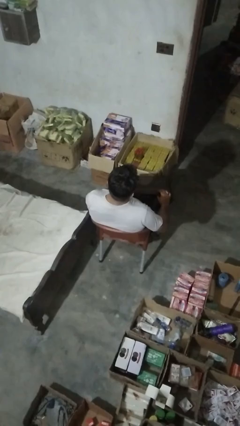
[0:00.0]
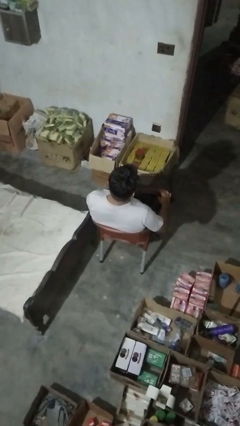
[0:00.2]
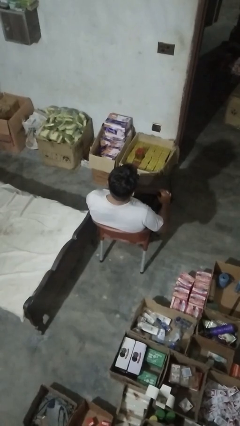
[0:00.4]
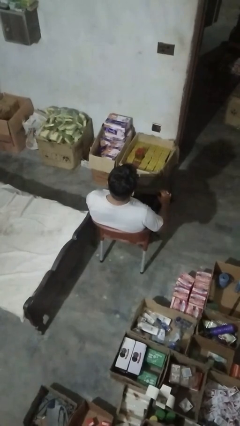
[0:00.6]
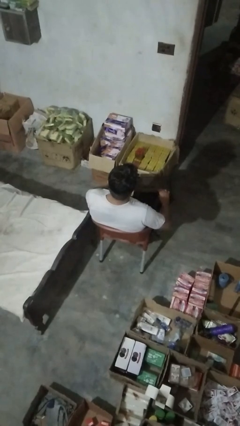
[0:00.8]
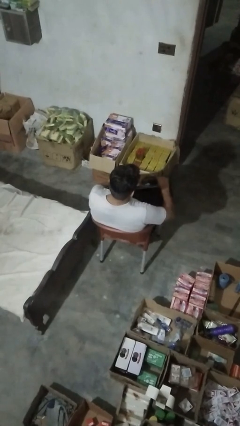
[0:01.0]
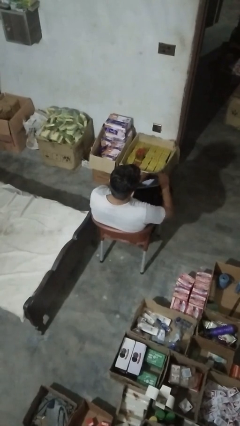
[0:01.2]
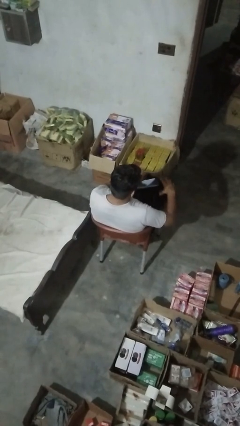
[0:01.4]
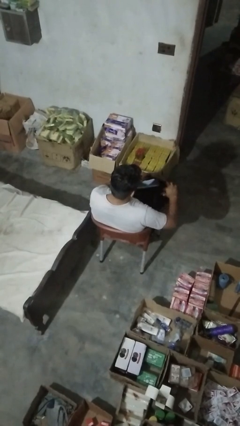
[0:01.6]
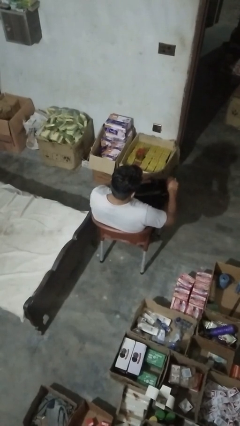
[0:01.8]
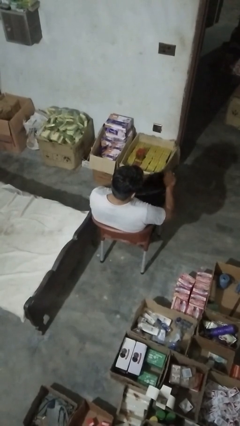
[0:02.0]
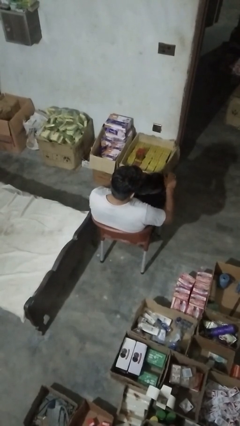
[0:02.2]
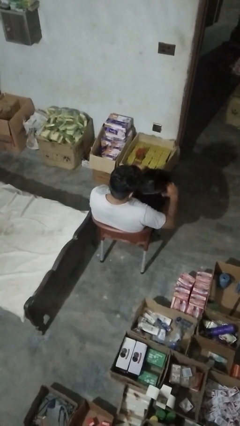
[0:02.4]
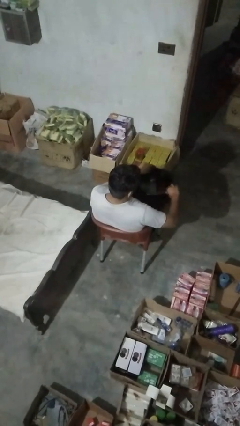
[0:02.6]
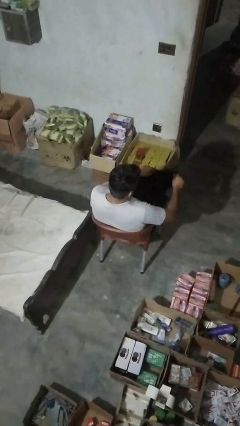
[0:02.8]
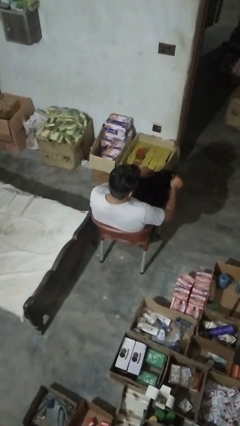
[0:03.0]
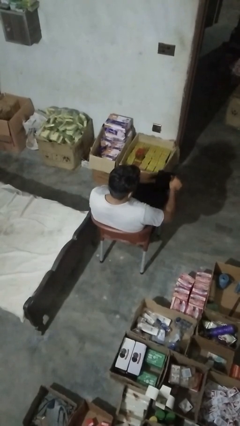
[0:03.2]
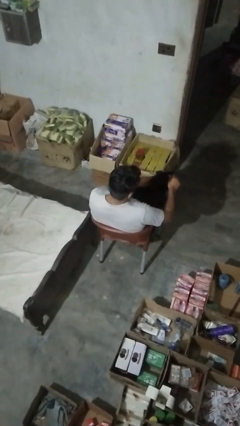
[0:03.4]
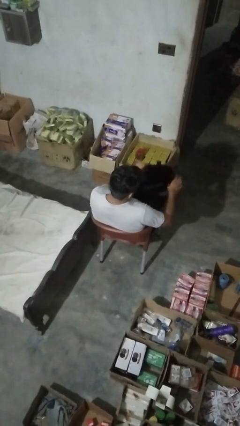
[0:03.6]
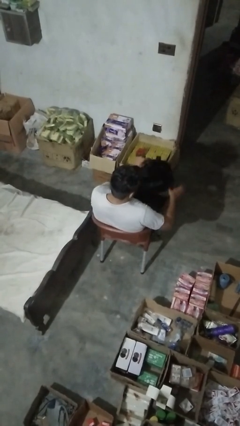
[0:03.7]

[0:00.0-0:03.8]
person searches in bag

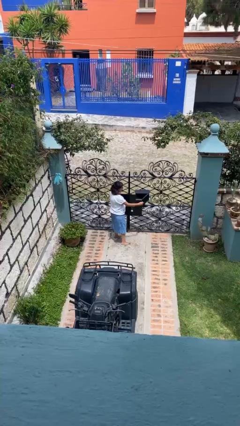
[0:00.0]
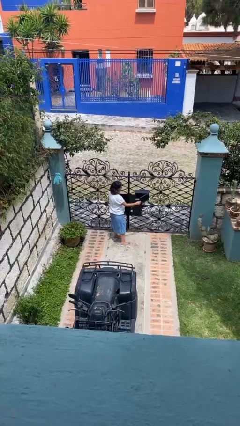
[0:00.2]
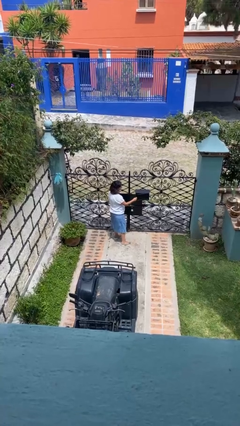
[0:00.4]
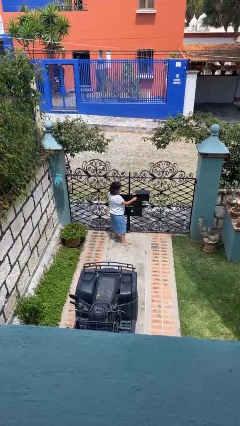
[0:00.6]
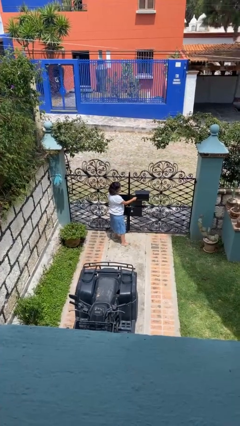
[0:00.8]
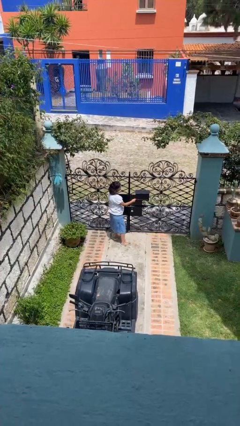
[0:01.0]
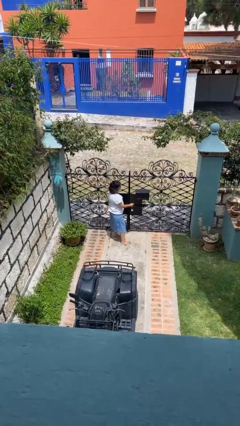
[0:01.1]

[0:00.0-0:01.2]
person closes mailbox

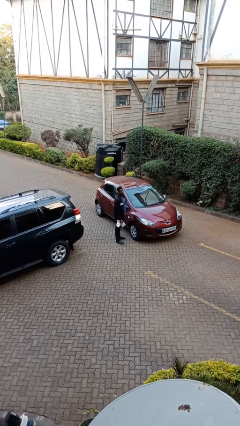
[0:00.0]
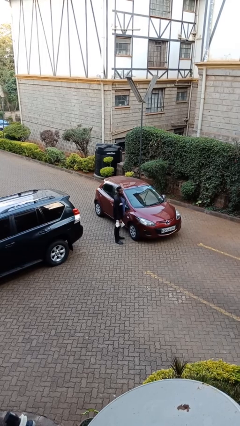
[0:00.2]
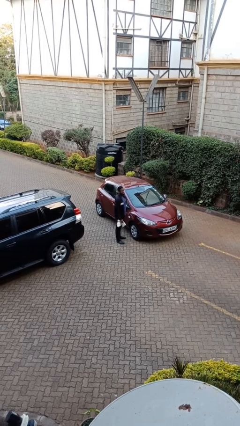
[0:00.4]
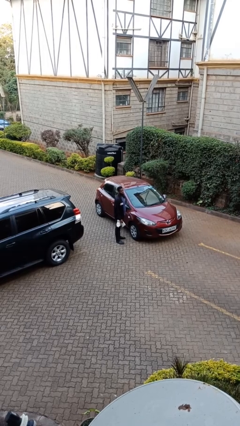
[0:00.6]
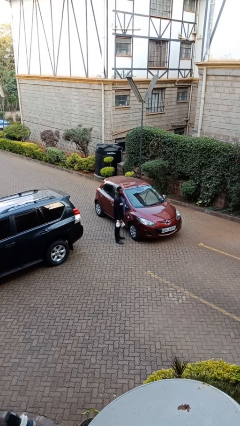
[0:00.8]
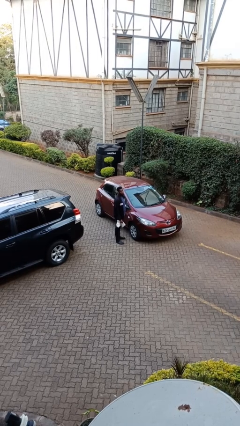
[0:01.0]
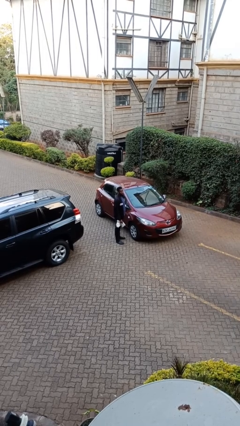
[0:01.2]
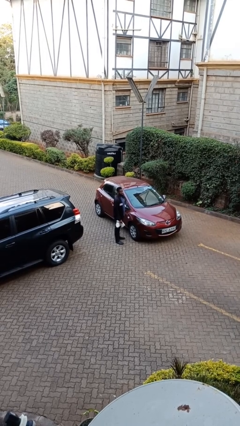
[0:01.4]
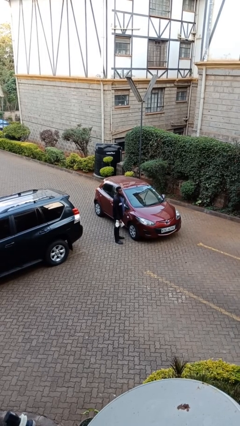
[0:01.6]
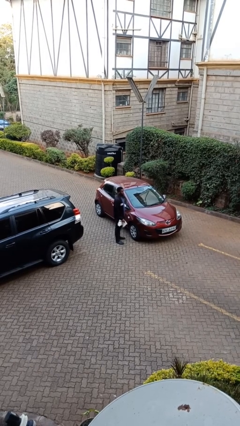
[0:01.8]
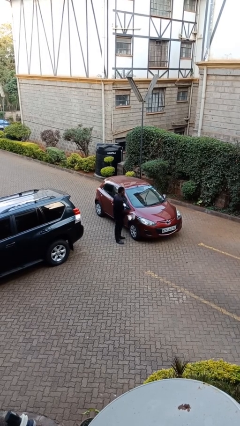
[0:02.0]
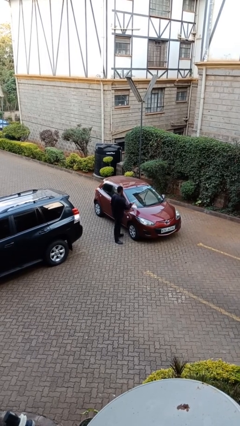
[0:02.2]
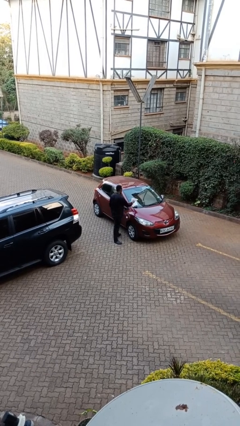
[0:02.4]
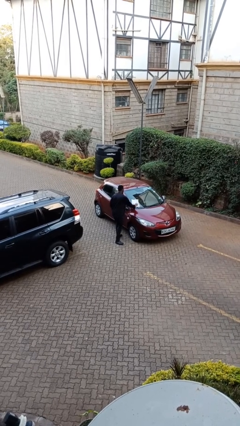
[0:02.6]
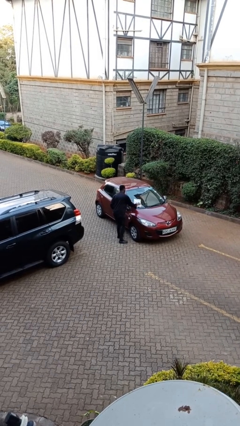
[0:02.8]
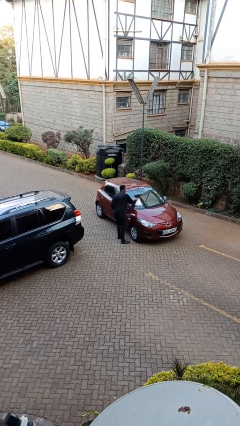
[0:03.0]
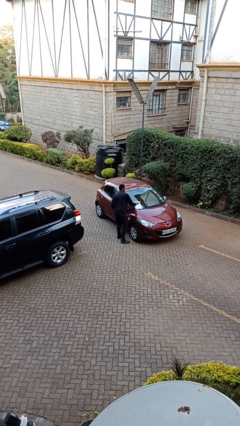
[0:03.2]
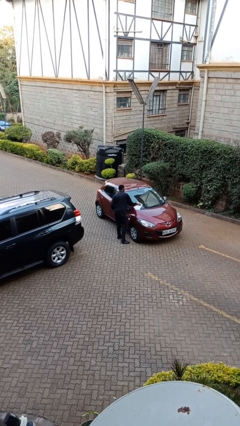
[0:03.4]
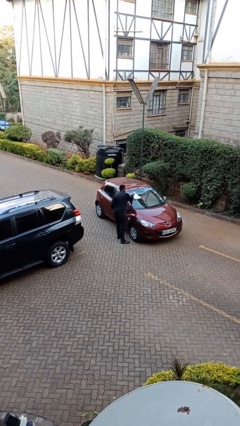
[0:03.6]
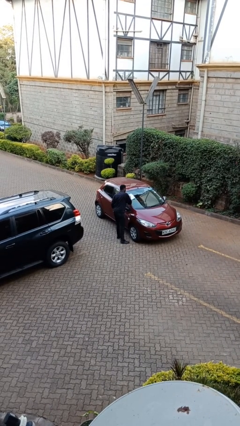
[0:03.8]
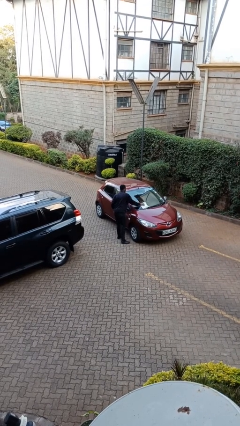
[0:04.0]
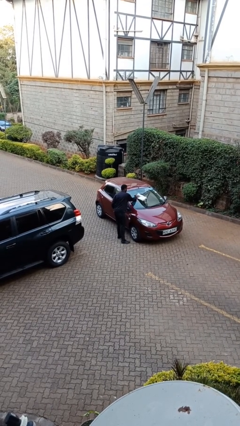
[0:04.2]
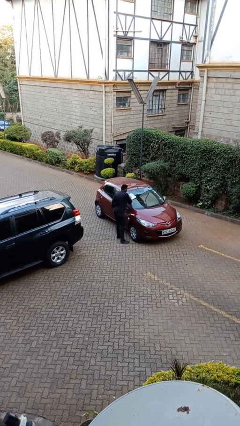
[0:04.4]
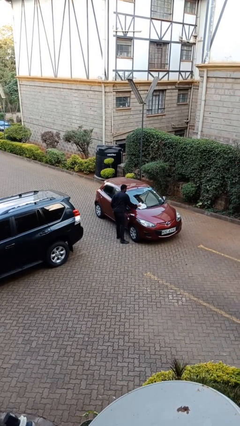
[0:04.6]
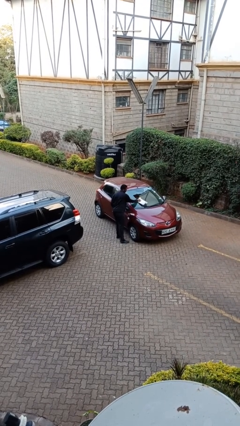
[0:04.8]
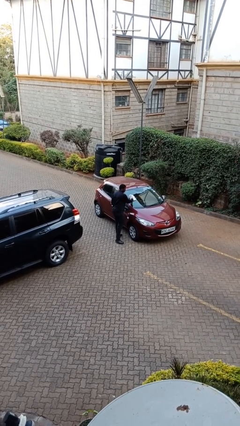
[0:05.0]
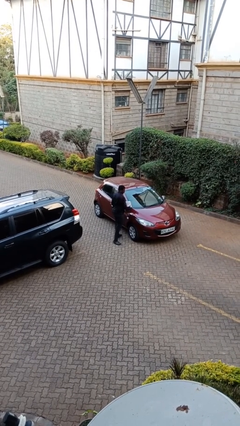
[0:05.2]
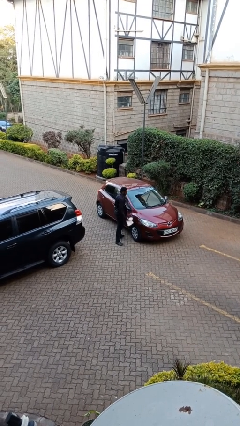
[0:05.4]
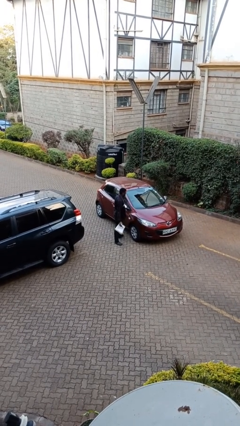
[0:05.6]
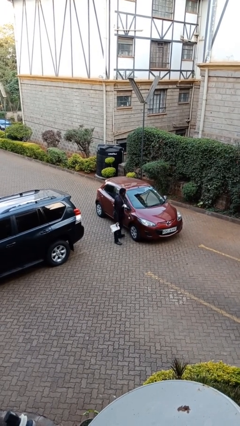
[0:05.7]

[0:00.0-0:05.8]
person polishes car with rag

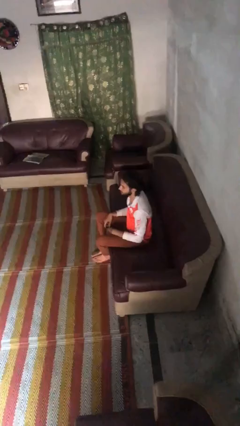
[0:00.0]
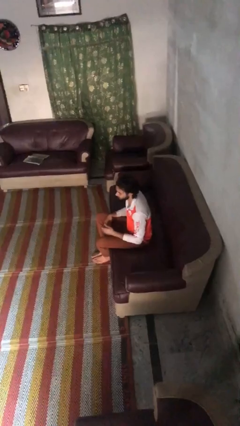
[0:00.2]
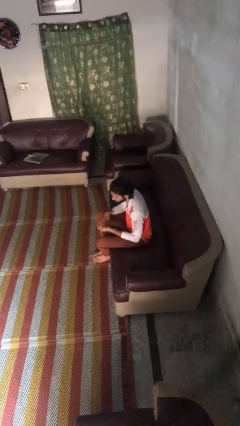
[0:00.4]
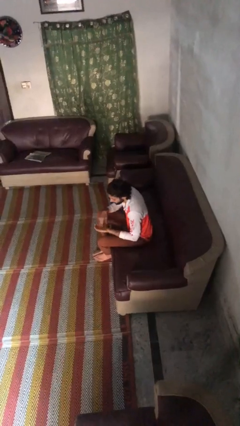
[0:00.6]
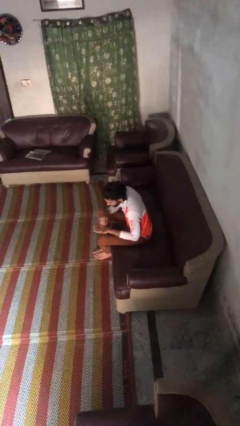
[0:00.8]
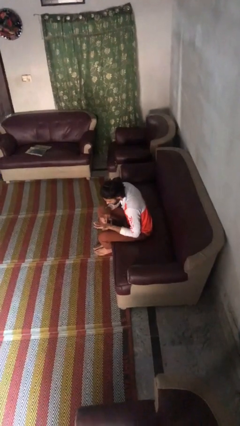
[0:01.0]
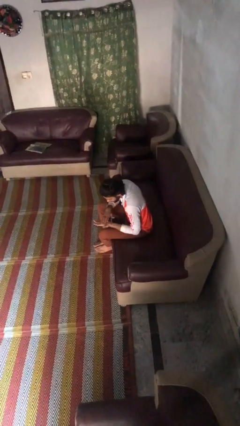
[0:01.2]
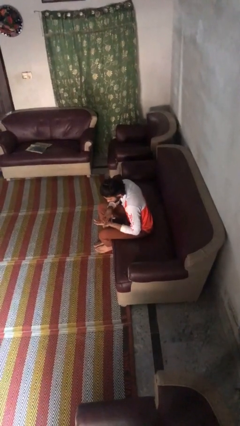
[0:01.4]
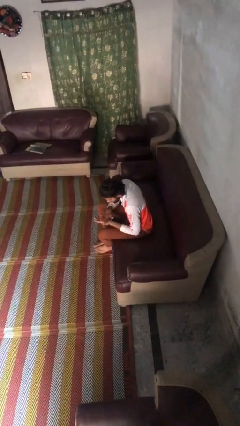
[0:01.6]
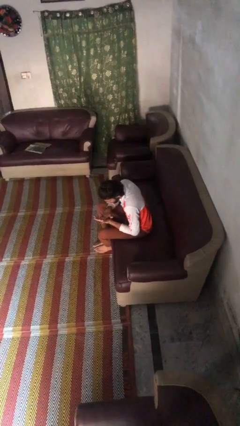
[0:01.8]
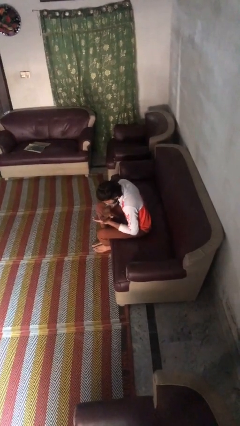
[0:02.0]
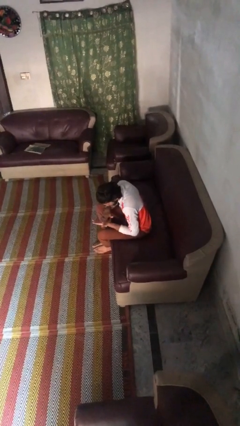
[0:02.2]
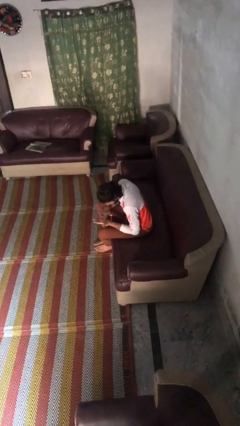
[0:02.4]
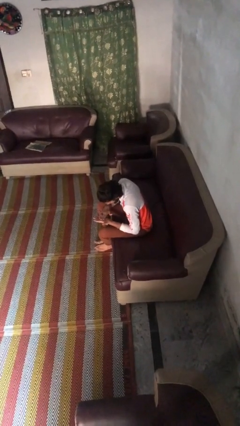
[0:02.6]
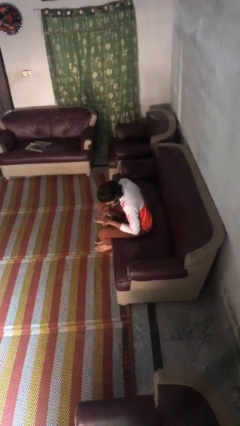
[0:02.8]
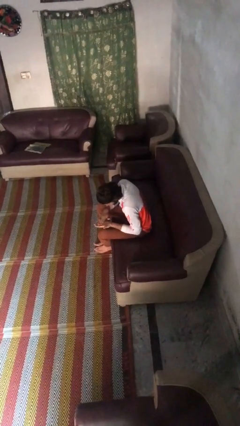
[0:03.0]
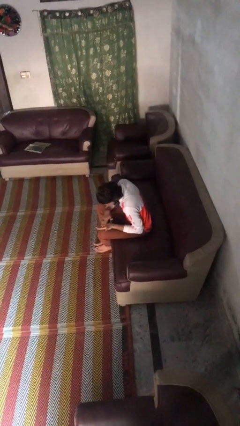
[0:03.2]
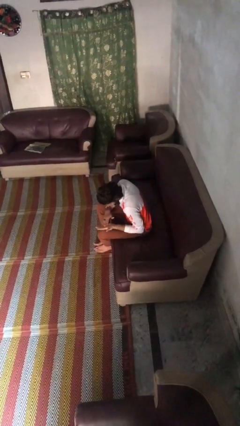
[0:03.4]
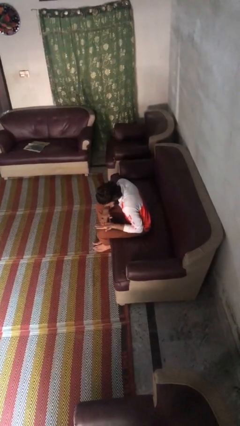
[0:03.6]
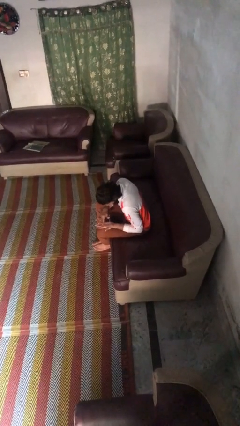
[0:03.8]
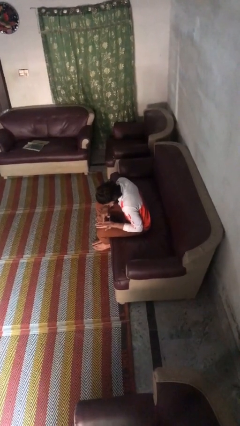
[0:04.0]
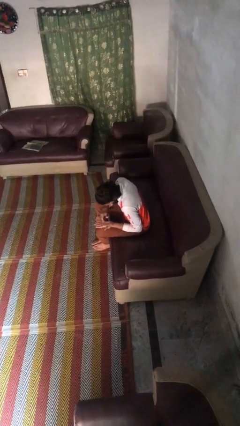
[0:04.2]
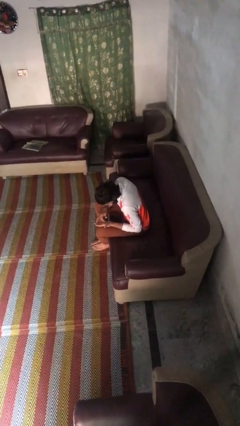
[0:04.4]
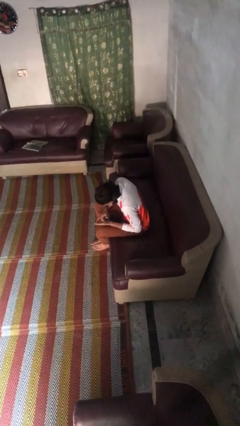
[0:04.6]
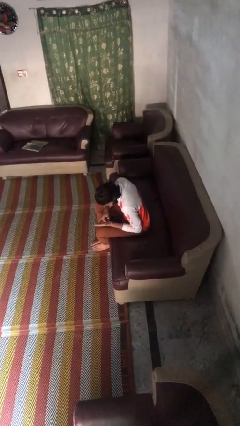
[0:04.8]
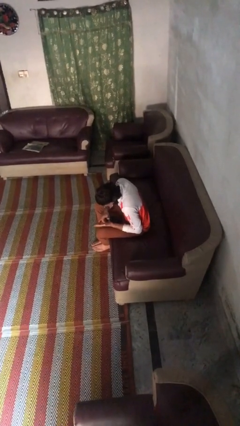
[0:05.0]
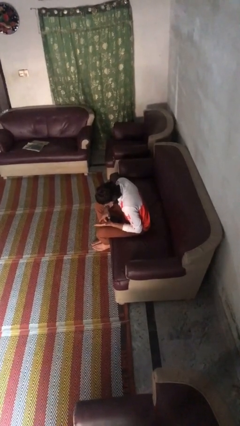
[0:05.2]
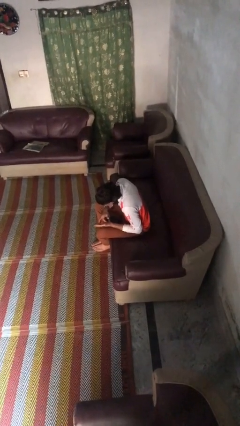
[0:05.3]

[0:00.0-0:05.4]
person looks at hands in lap

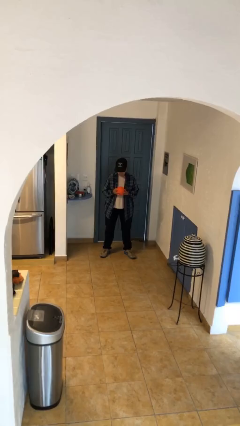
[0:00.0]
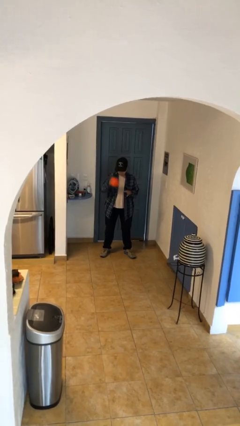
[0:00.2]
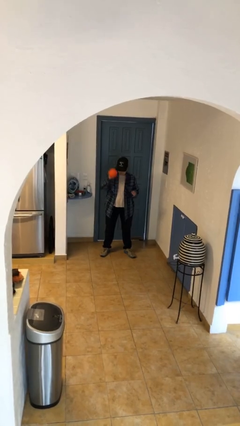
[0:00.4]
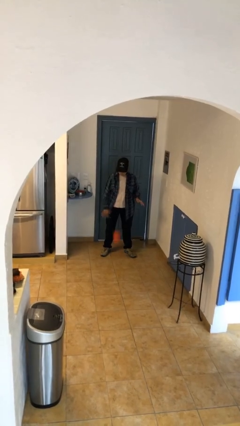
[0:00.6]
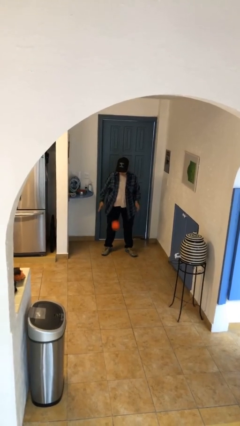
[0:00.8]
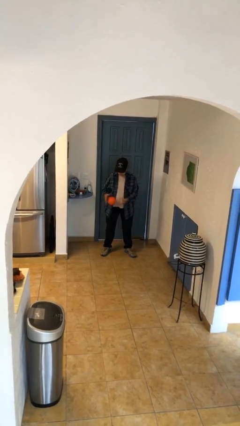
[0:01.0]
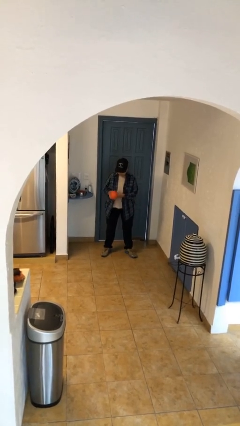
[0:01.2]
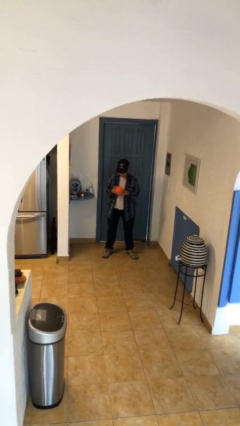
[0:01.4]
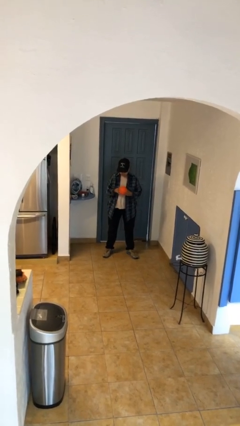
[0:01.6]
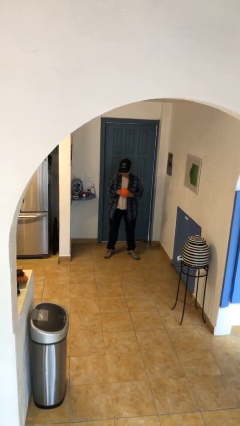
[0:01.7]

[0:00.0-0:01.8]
person bounces ball on floor
